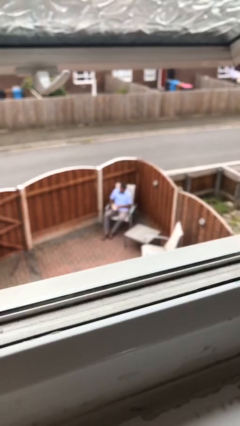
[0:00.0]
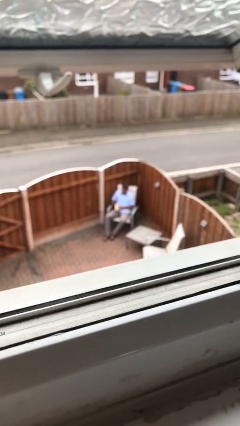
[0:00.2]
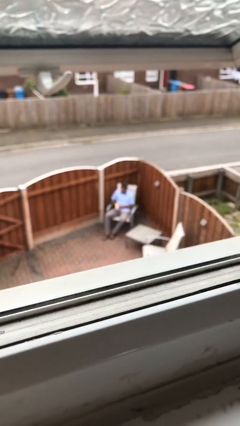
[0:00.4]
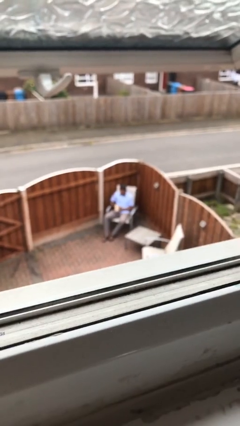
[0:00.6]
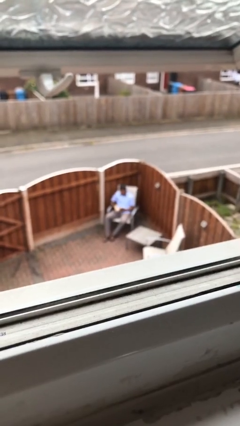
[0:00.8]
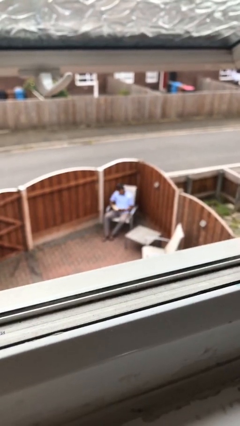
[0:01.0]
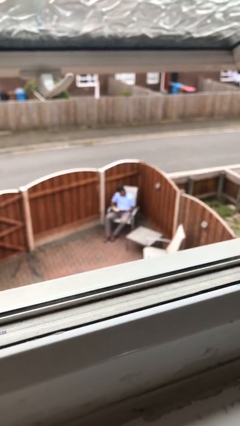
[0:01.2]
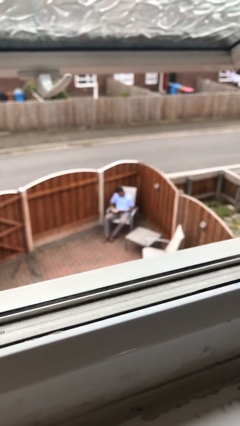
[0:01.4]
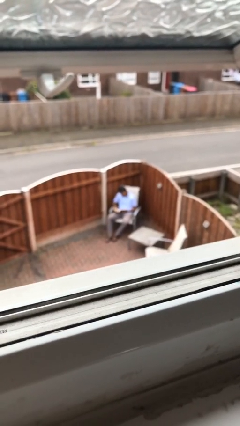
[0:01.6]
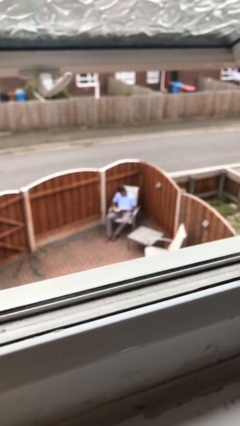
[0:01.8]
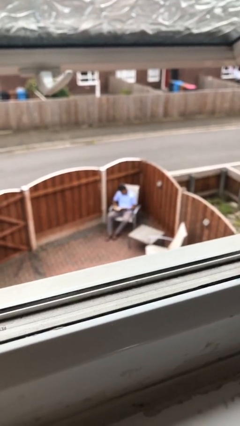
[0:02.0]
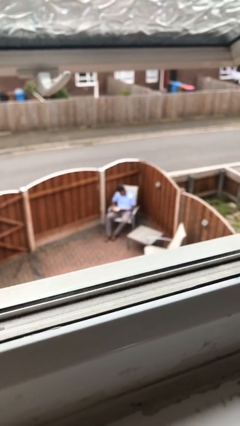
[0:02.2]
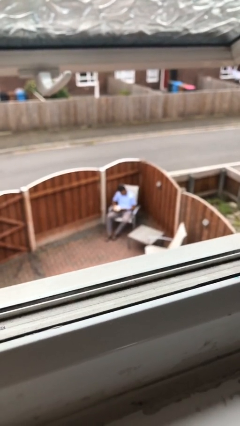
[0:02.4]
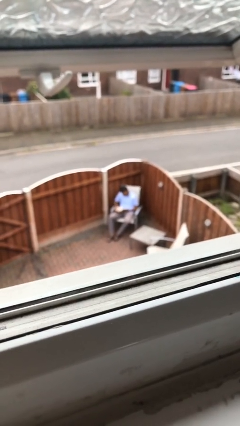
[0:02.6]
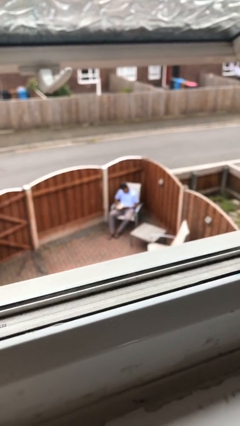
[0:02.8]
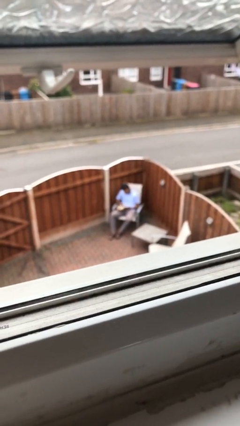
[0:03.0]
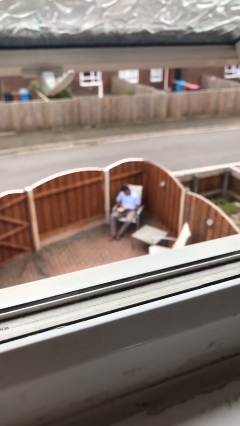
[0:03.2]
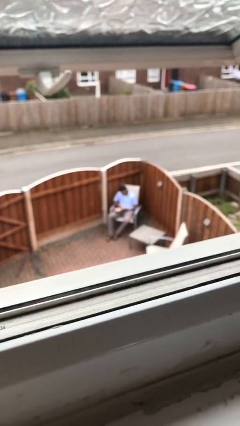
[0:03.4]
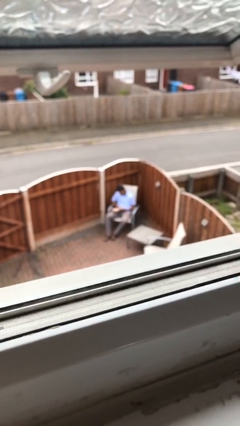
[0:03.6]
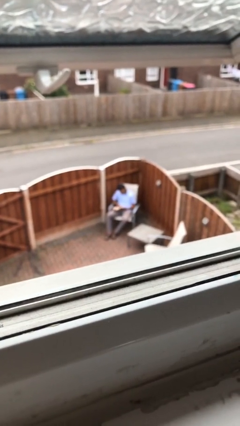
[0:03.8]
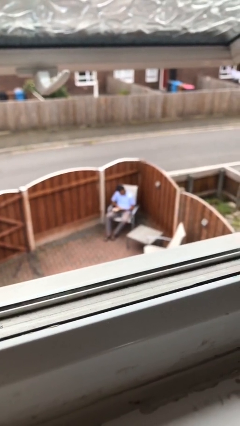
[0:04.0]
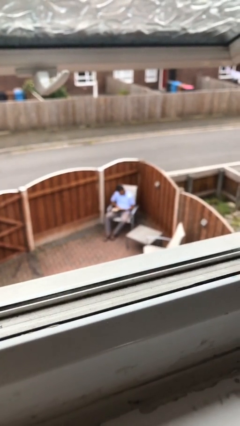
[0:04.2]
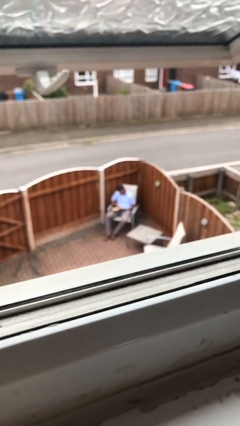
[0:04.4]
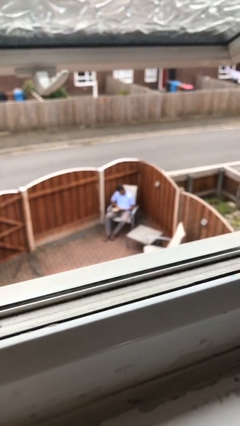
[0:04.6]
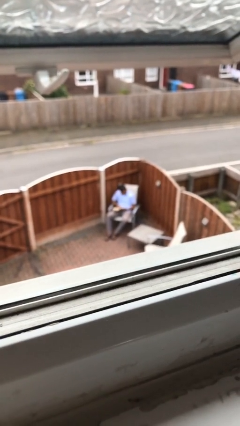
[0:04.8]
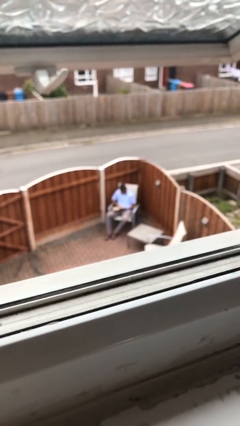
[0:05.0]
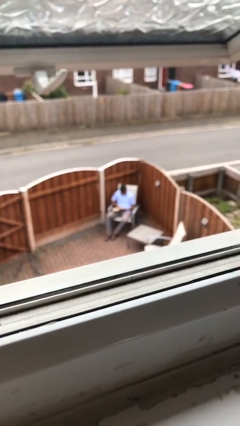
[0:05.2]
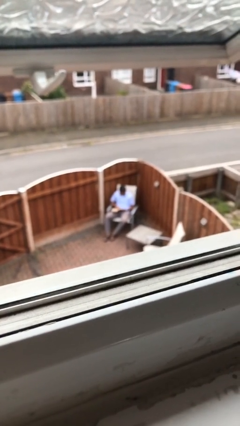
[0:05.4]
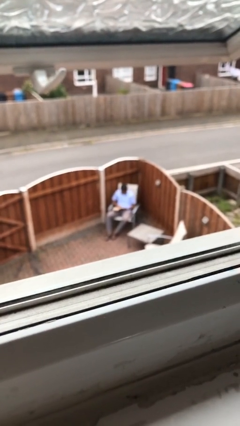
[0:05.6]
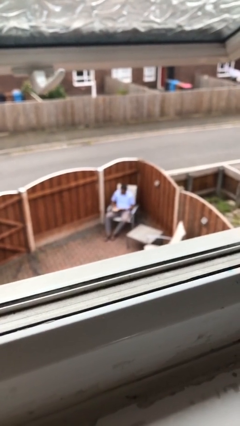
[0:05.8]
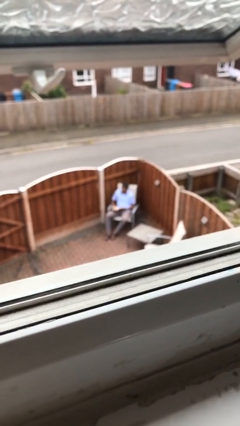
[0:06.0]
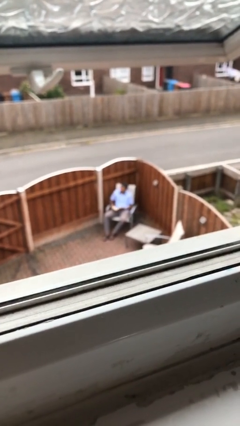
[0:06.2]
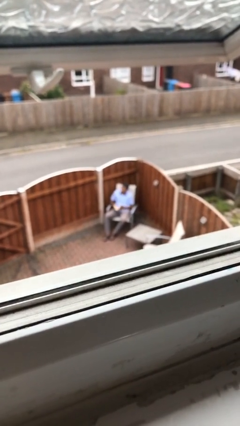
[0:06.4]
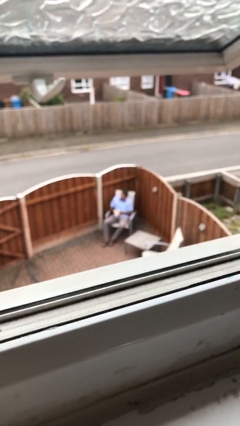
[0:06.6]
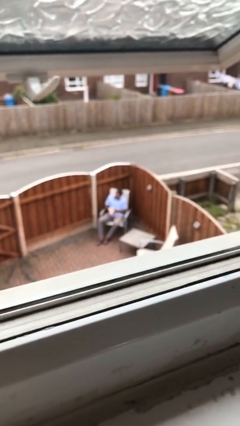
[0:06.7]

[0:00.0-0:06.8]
person reads document

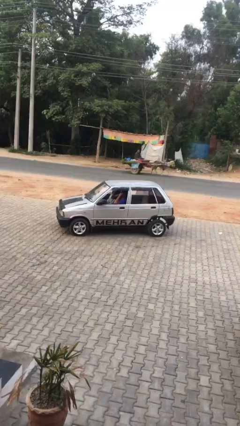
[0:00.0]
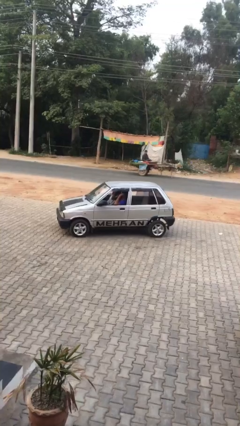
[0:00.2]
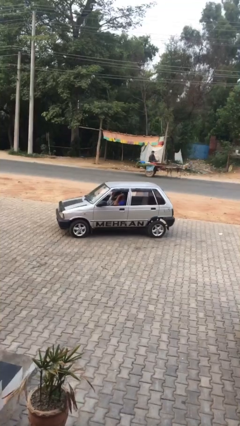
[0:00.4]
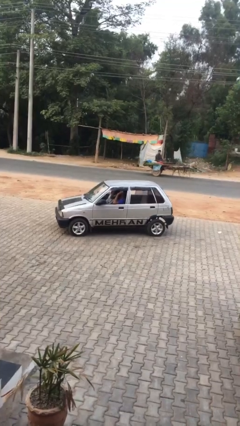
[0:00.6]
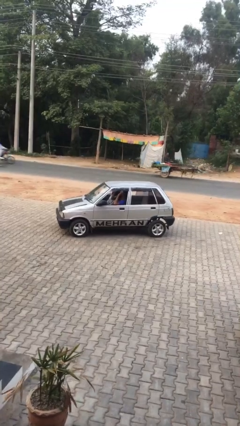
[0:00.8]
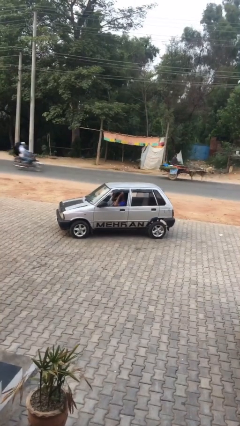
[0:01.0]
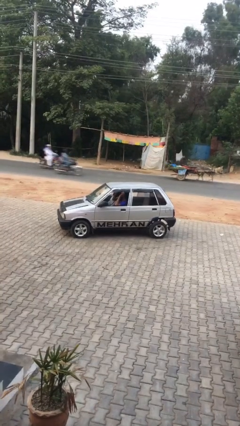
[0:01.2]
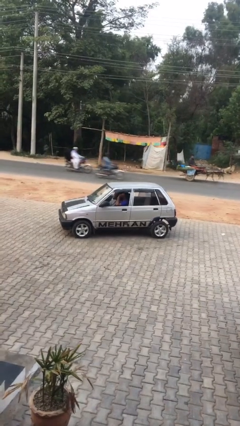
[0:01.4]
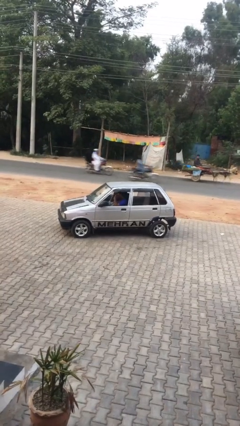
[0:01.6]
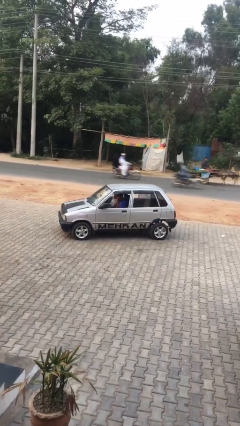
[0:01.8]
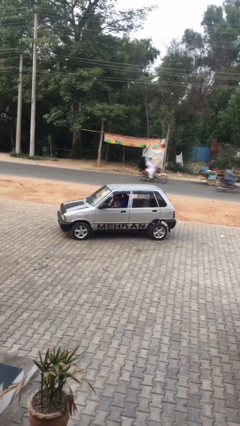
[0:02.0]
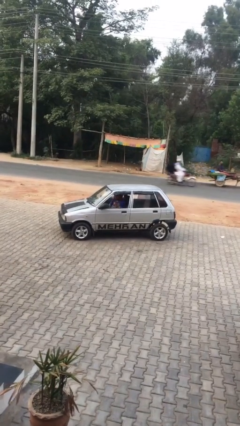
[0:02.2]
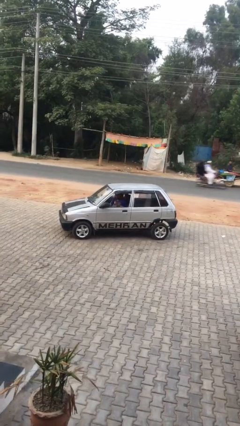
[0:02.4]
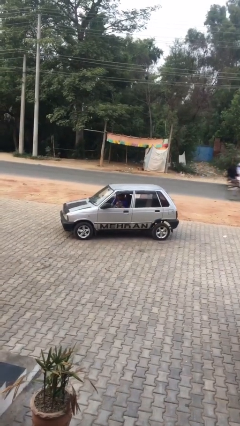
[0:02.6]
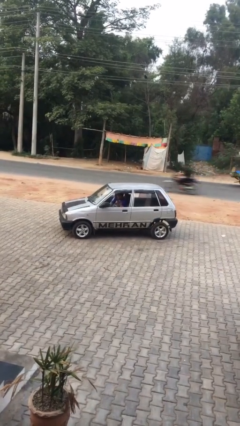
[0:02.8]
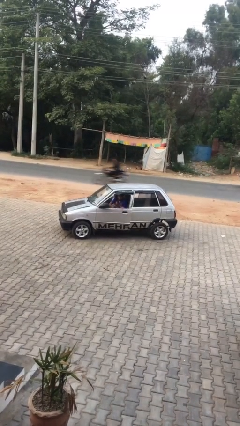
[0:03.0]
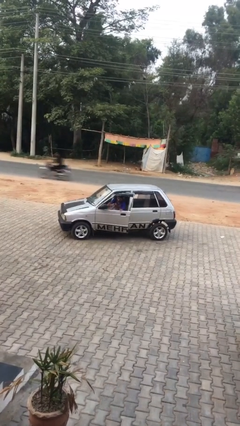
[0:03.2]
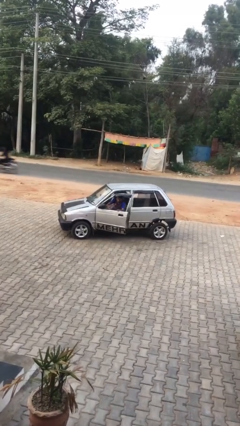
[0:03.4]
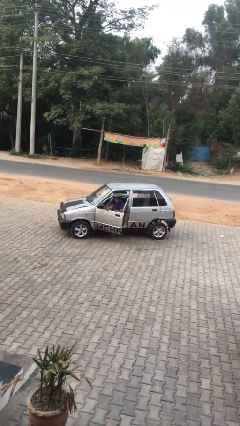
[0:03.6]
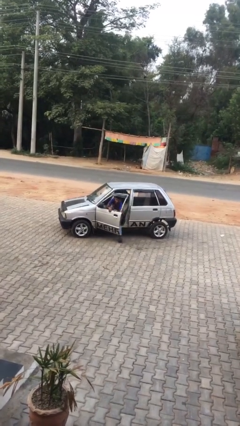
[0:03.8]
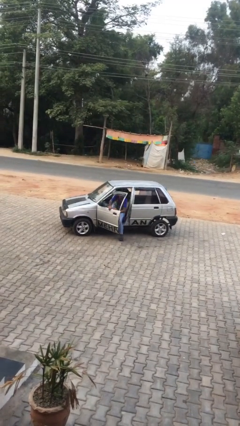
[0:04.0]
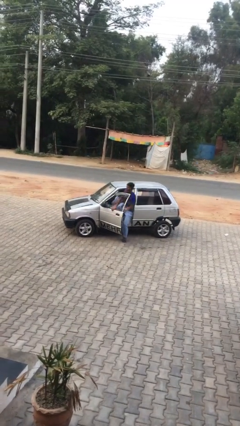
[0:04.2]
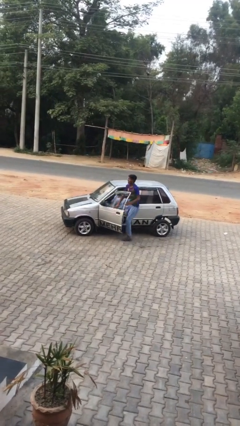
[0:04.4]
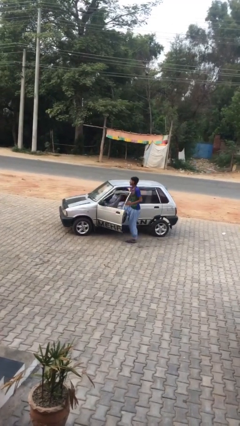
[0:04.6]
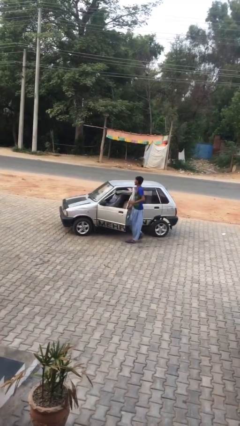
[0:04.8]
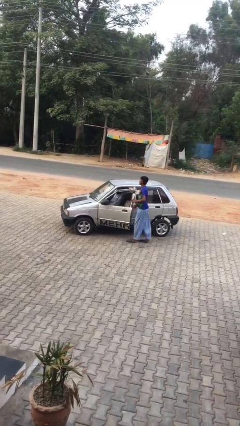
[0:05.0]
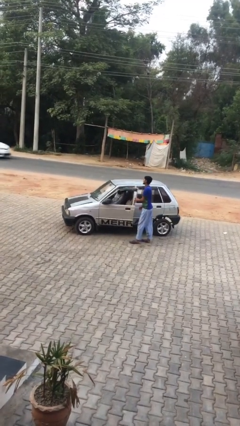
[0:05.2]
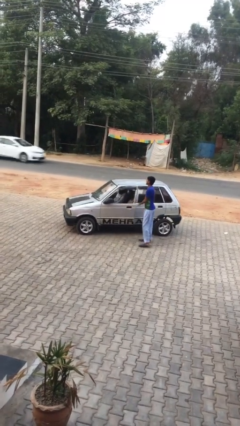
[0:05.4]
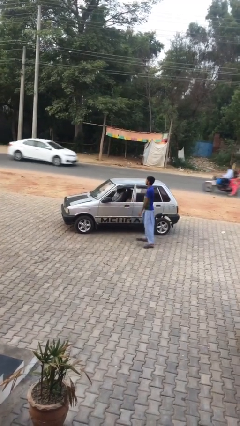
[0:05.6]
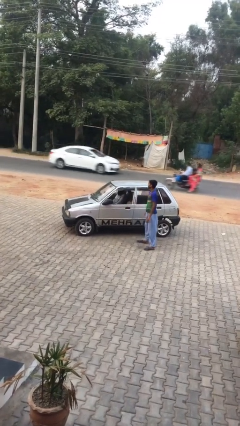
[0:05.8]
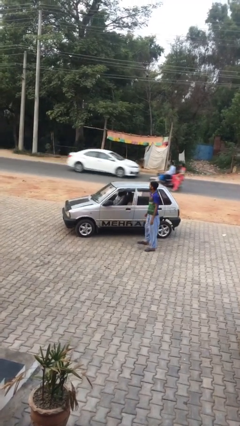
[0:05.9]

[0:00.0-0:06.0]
car drops off person

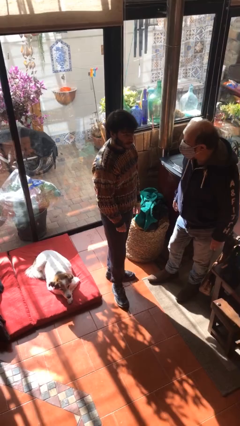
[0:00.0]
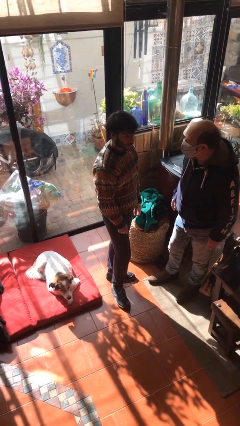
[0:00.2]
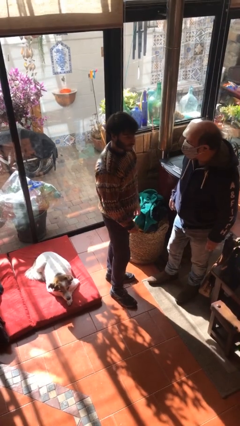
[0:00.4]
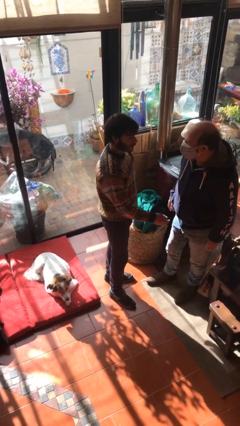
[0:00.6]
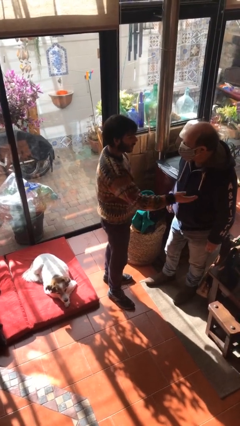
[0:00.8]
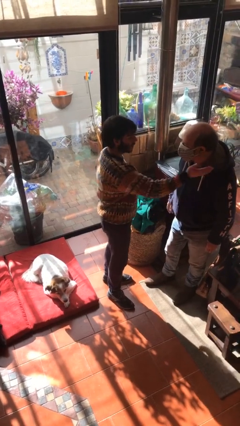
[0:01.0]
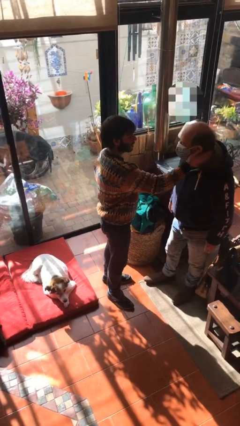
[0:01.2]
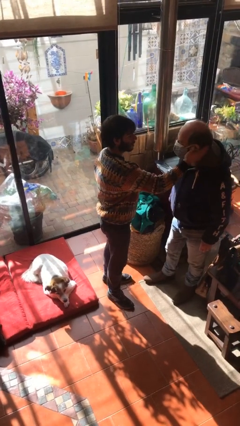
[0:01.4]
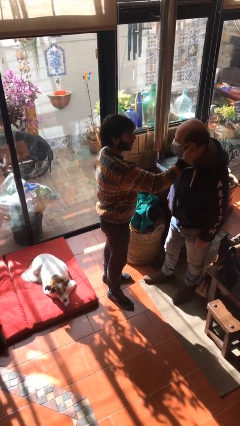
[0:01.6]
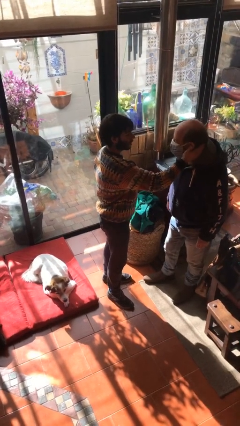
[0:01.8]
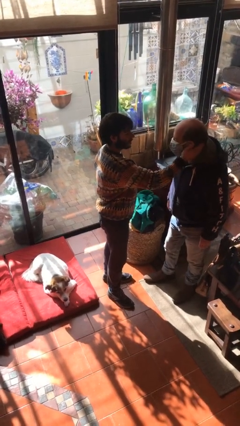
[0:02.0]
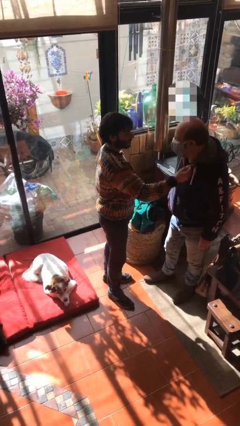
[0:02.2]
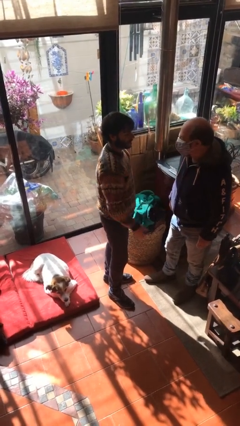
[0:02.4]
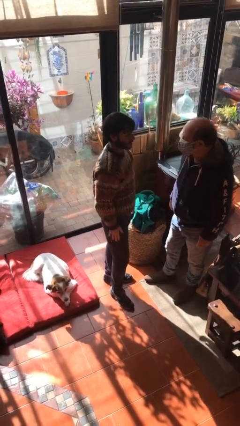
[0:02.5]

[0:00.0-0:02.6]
person touches face of person

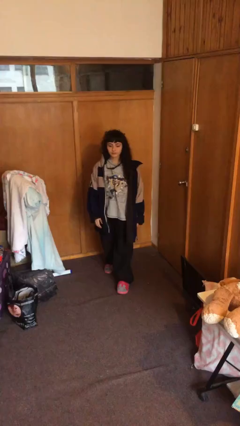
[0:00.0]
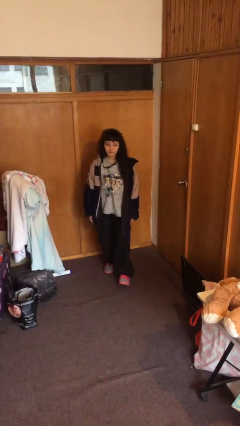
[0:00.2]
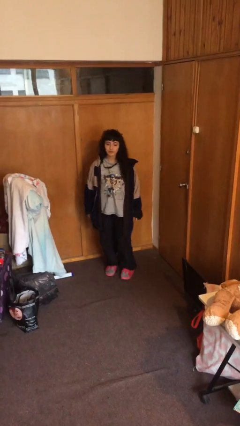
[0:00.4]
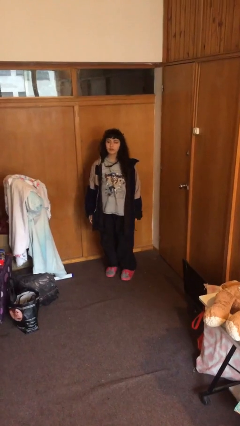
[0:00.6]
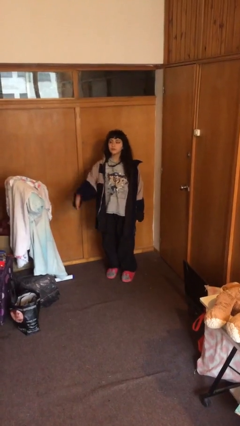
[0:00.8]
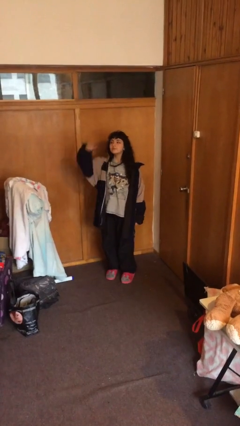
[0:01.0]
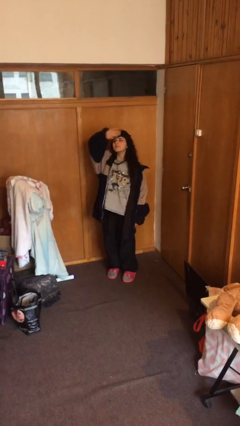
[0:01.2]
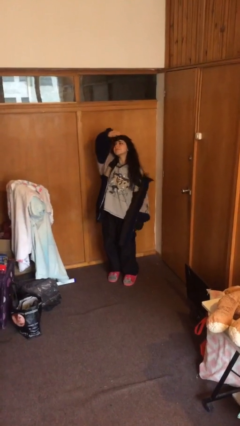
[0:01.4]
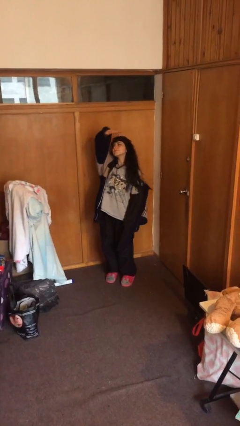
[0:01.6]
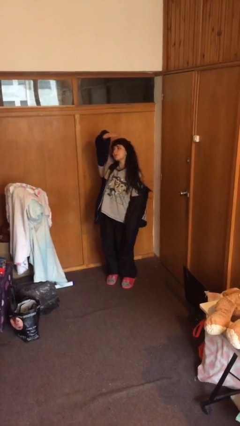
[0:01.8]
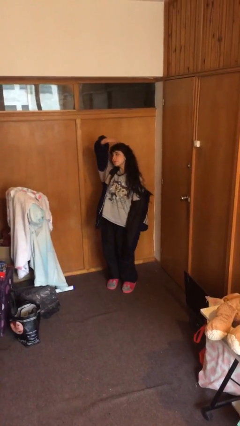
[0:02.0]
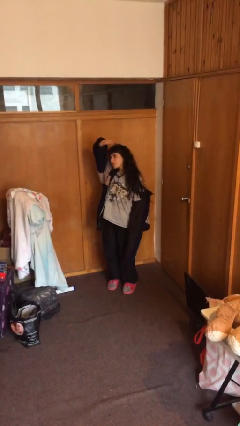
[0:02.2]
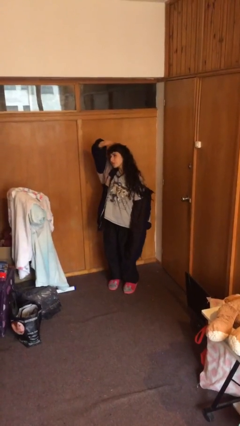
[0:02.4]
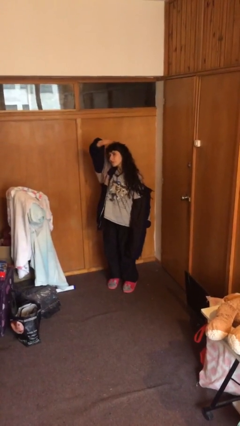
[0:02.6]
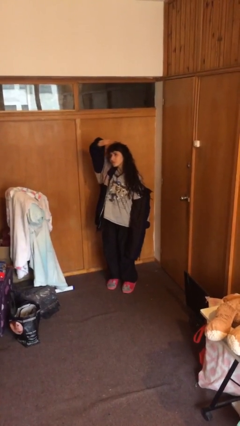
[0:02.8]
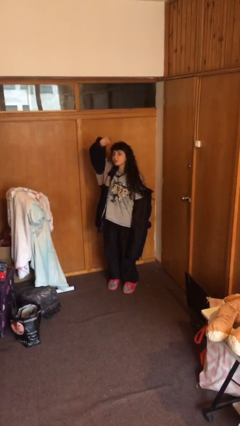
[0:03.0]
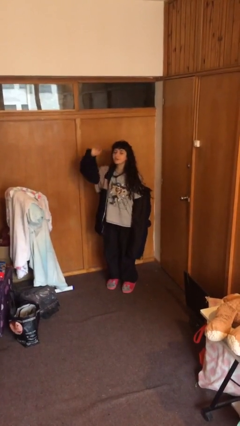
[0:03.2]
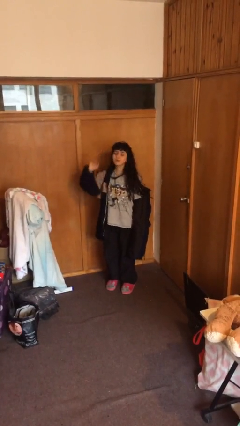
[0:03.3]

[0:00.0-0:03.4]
person shades eyes
